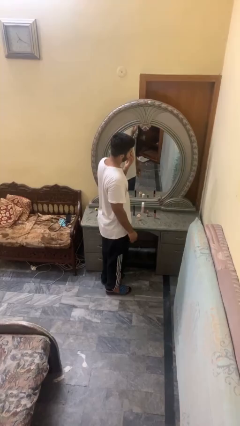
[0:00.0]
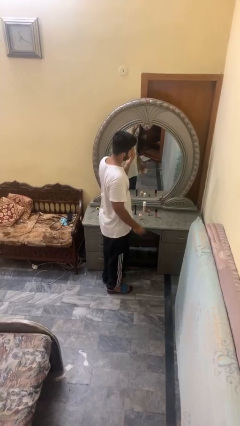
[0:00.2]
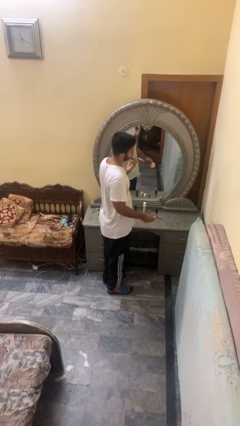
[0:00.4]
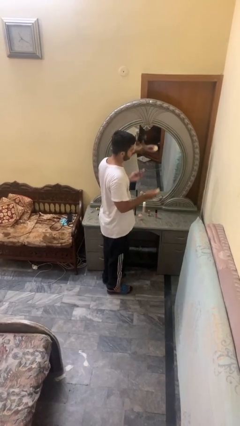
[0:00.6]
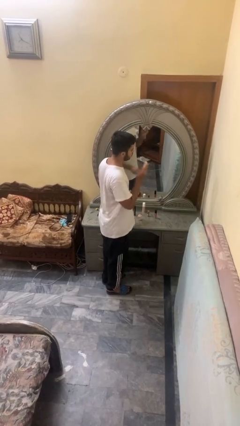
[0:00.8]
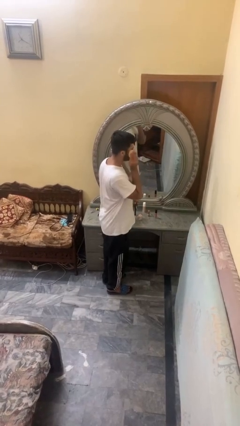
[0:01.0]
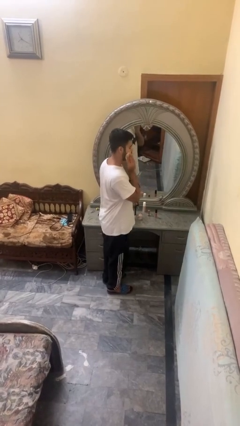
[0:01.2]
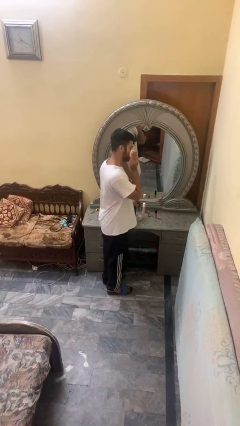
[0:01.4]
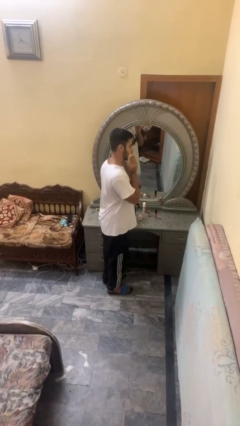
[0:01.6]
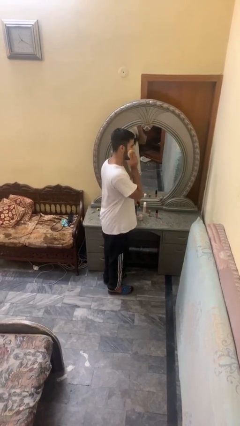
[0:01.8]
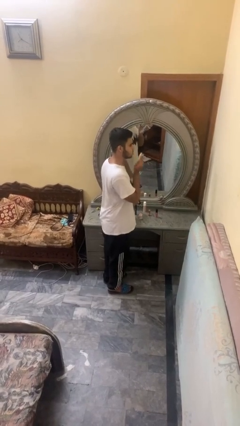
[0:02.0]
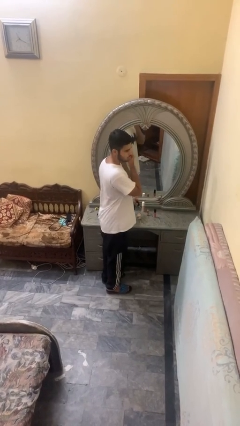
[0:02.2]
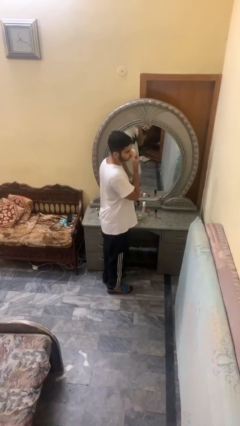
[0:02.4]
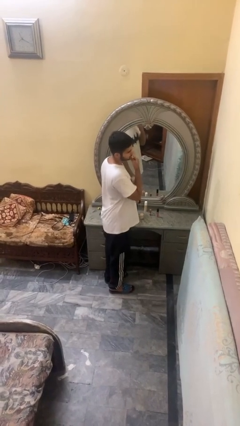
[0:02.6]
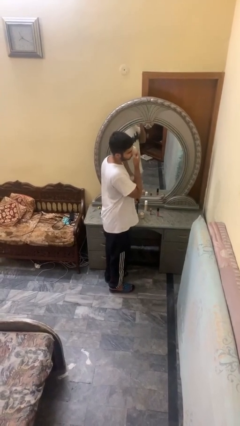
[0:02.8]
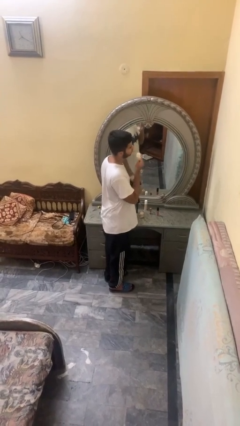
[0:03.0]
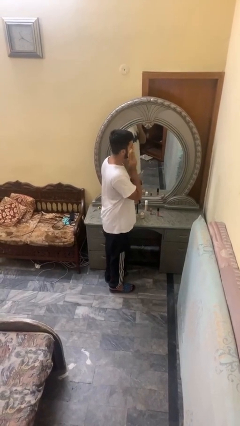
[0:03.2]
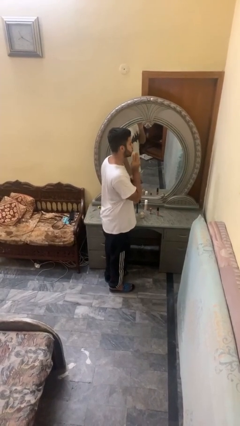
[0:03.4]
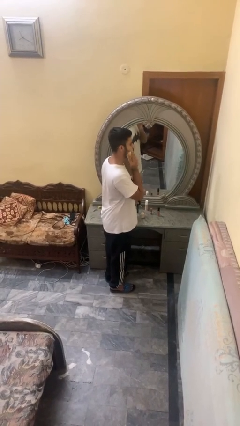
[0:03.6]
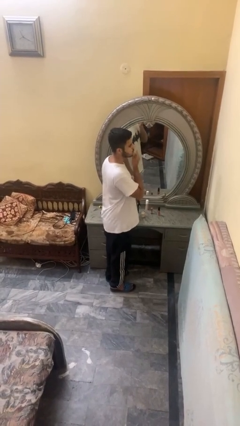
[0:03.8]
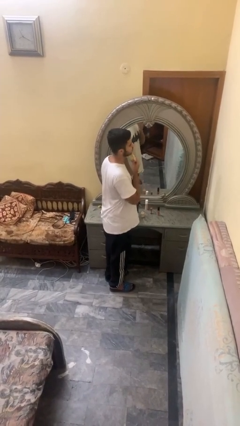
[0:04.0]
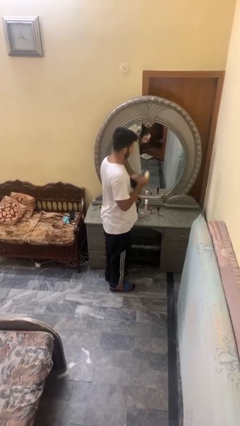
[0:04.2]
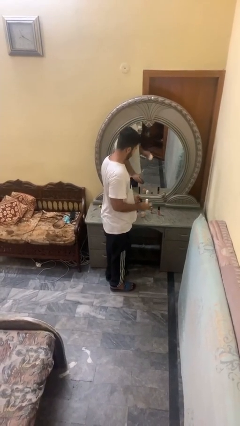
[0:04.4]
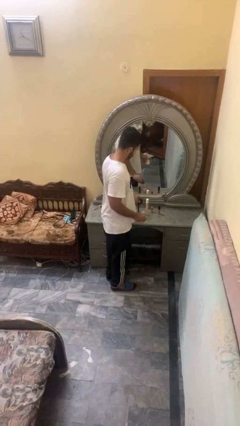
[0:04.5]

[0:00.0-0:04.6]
person applies foundation makeup

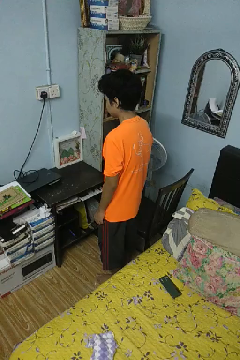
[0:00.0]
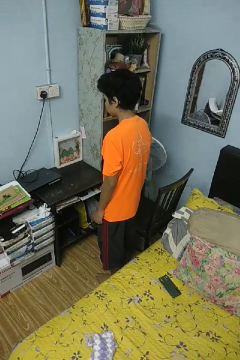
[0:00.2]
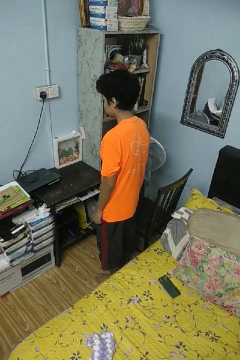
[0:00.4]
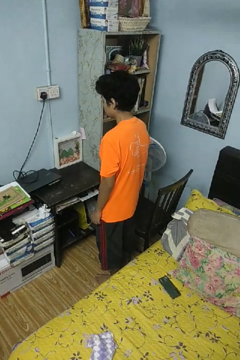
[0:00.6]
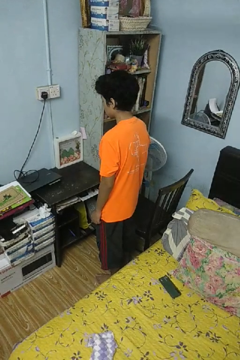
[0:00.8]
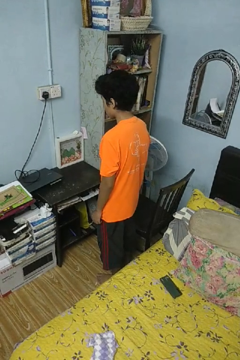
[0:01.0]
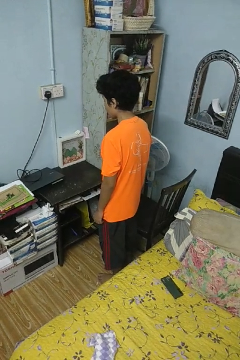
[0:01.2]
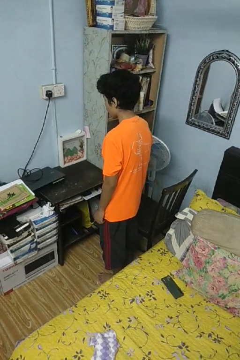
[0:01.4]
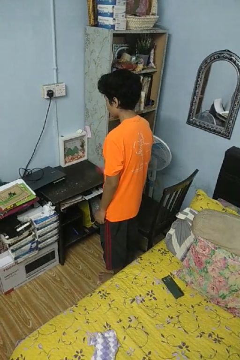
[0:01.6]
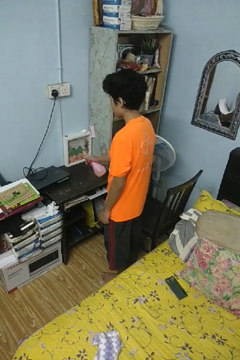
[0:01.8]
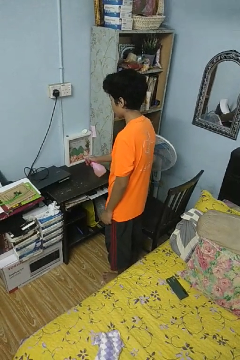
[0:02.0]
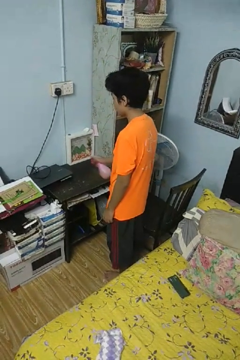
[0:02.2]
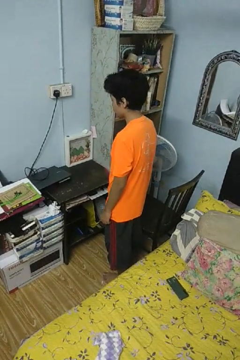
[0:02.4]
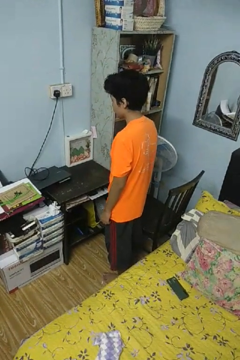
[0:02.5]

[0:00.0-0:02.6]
person sprays from bottle

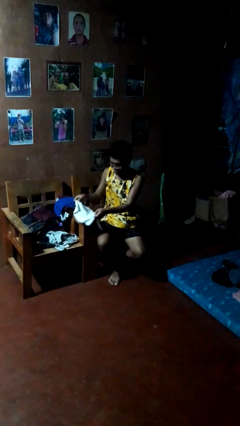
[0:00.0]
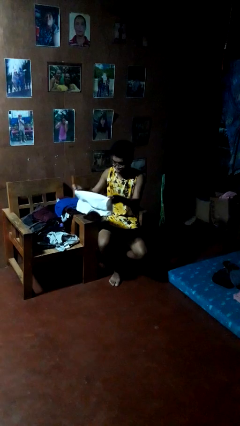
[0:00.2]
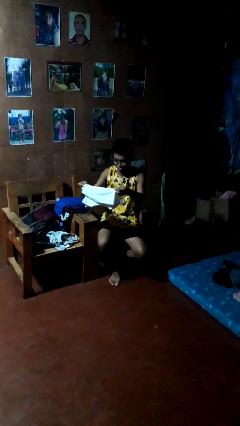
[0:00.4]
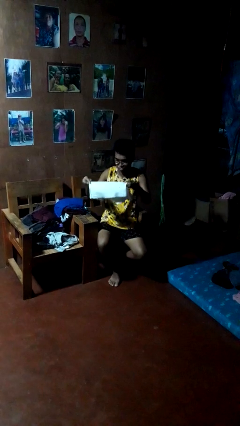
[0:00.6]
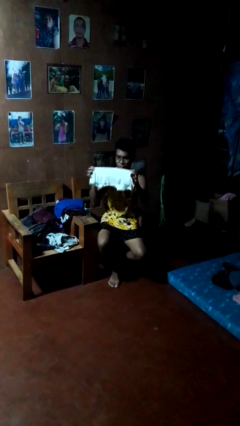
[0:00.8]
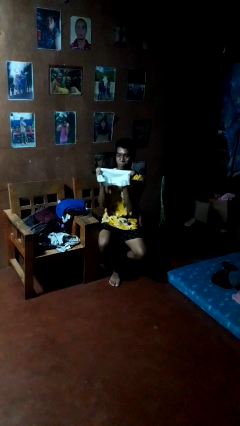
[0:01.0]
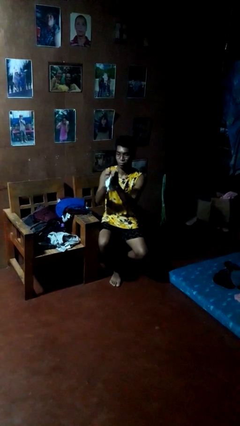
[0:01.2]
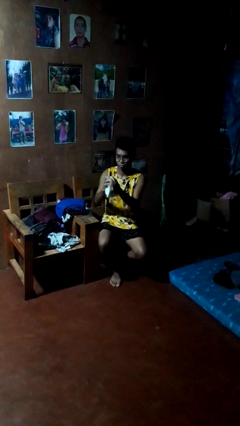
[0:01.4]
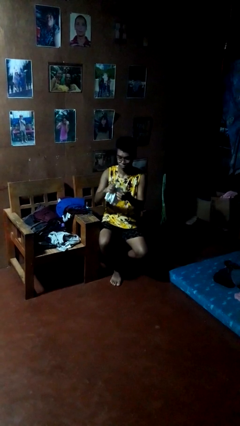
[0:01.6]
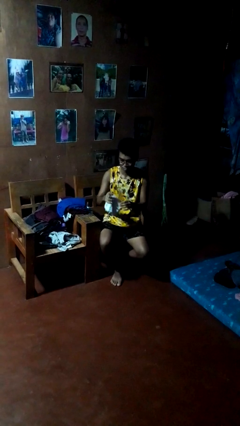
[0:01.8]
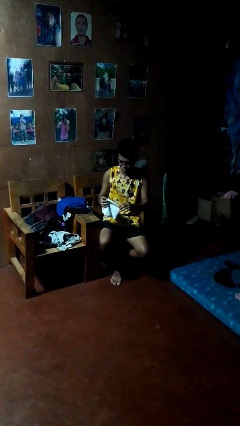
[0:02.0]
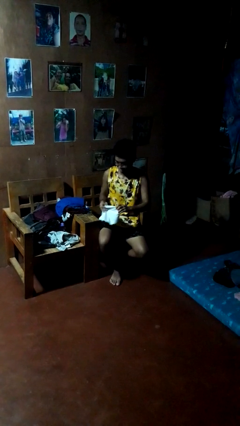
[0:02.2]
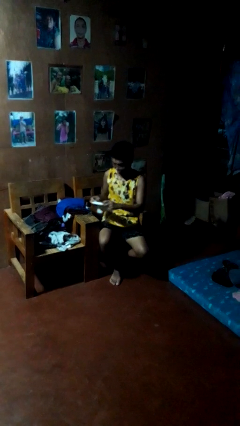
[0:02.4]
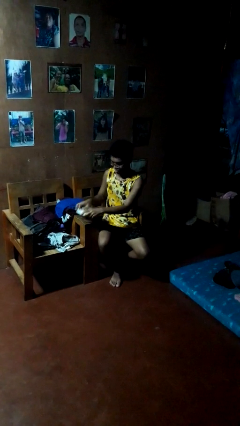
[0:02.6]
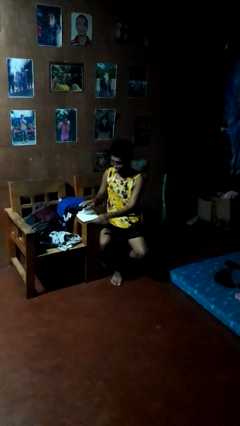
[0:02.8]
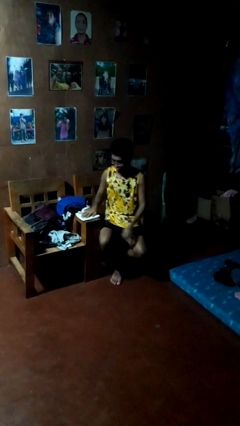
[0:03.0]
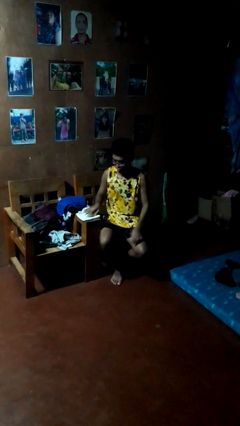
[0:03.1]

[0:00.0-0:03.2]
person folds shirt

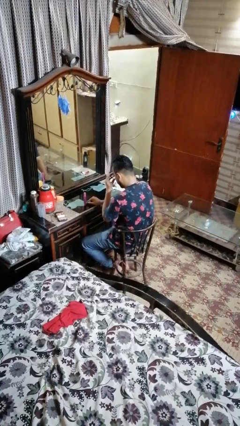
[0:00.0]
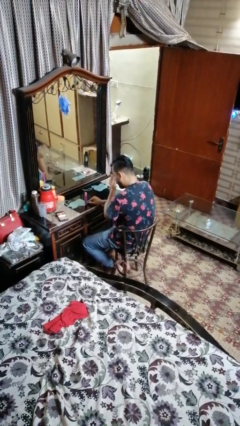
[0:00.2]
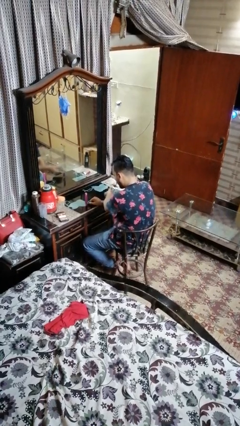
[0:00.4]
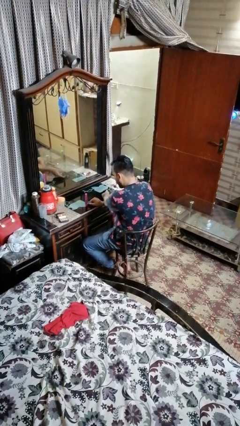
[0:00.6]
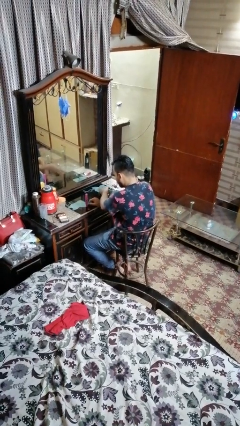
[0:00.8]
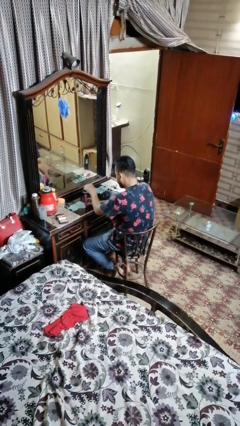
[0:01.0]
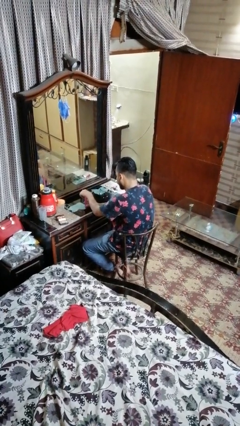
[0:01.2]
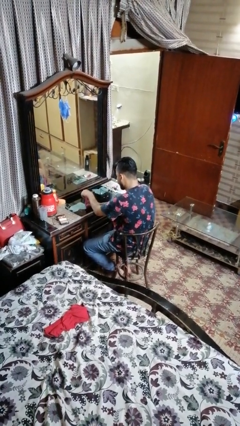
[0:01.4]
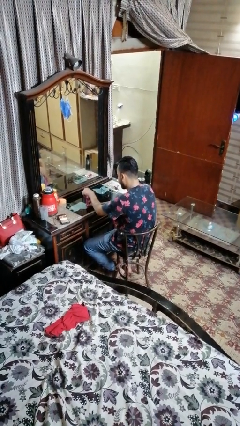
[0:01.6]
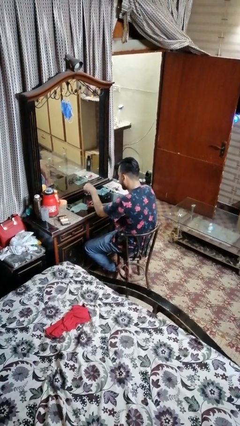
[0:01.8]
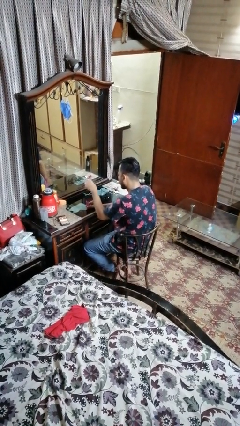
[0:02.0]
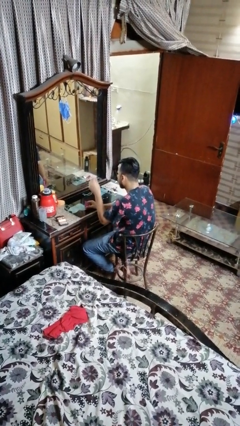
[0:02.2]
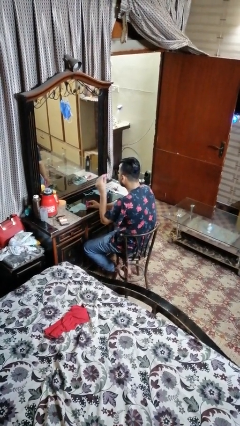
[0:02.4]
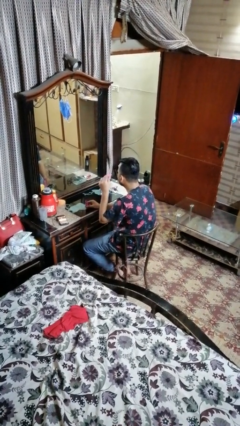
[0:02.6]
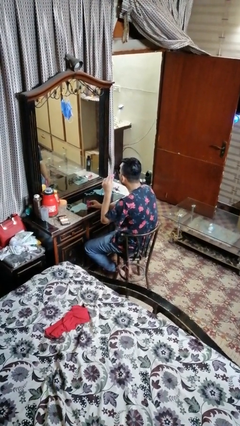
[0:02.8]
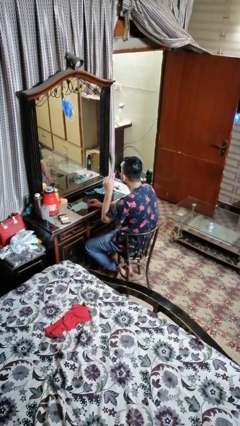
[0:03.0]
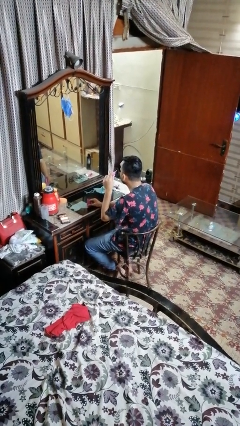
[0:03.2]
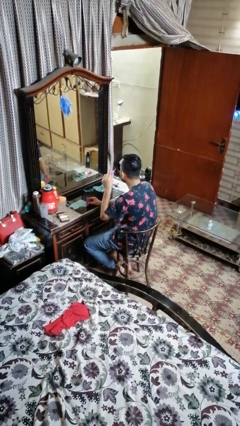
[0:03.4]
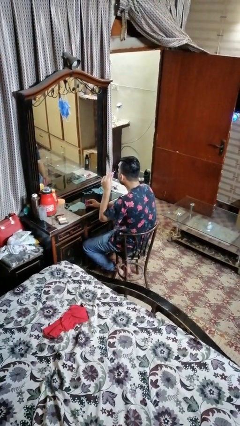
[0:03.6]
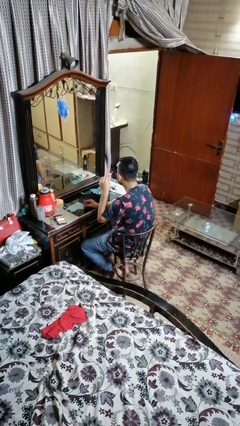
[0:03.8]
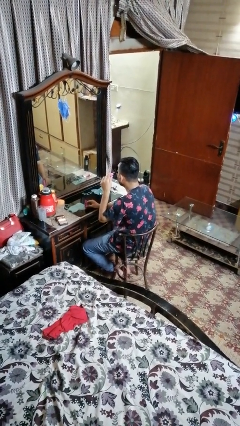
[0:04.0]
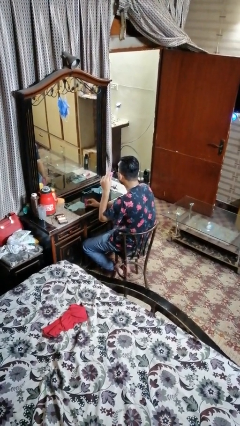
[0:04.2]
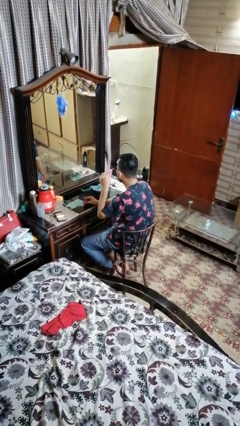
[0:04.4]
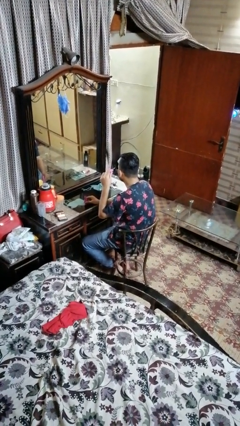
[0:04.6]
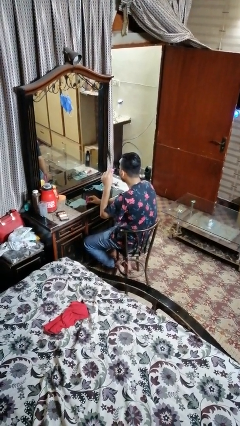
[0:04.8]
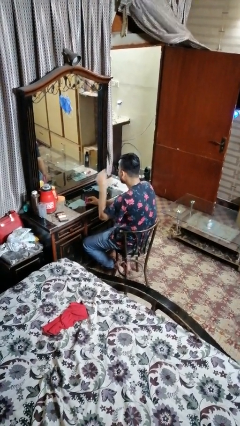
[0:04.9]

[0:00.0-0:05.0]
person applies eye makeup

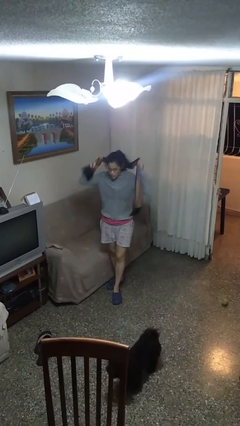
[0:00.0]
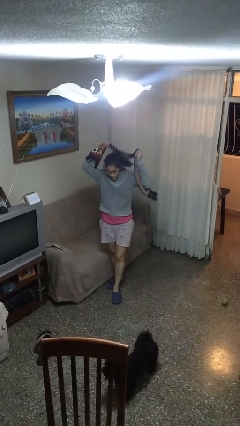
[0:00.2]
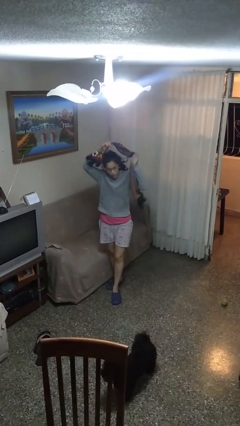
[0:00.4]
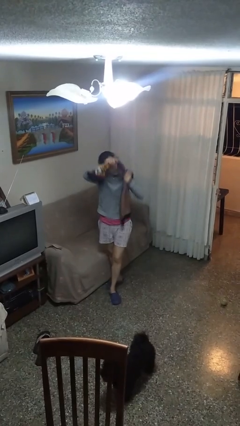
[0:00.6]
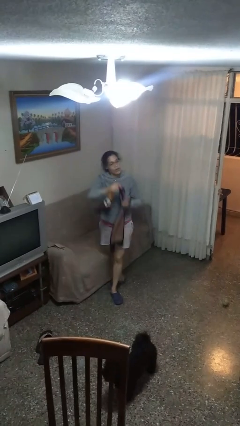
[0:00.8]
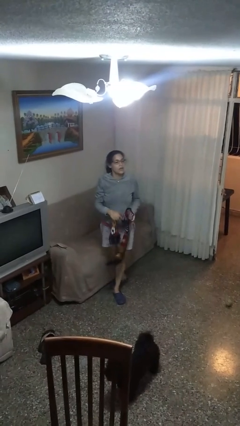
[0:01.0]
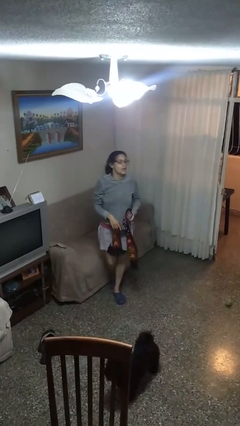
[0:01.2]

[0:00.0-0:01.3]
person takes off scarf

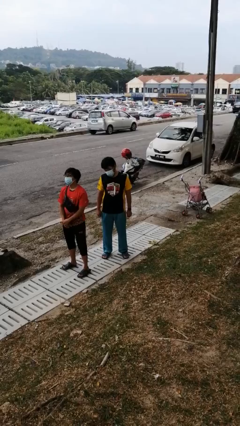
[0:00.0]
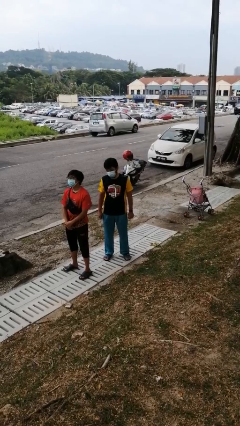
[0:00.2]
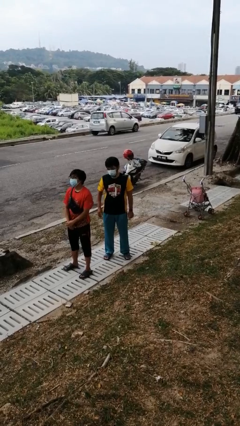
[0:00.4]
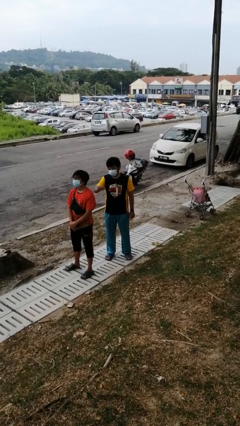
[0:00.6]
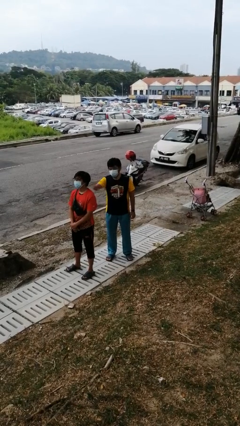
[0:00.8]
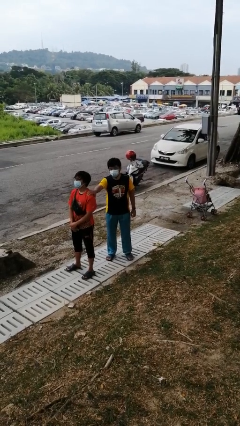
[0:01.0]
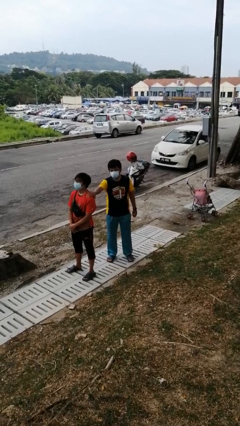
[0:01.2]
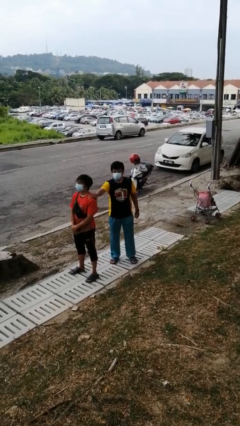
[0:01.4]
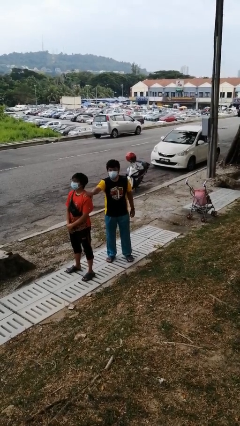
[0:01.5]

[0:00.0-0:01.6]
person grabs person by shoulder
